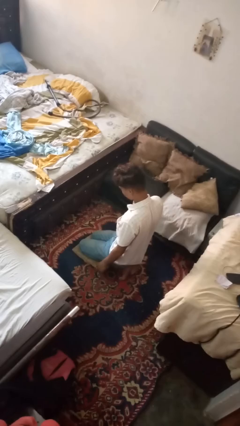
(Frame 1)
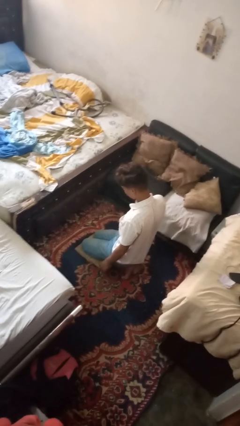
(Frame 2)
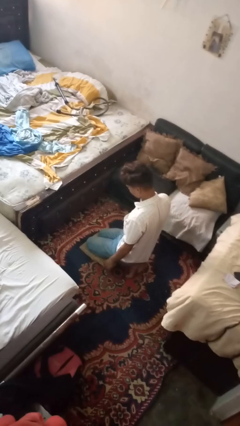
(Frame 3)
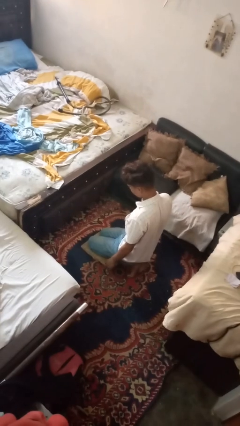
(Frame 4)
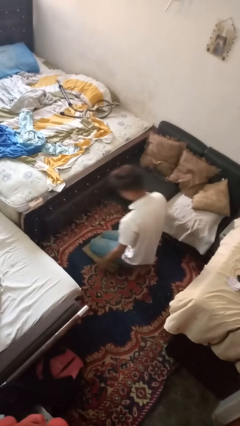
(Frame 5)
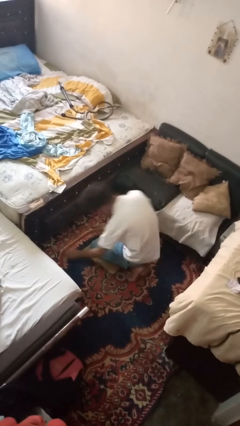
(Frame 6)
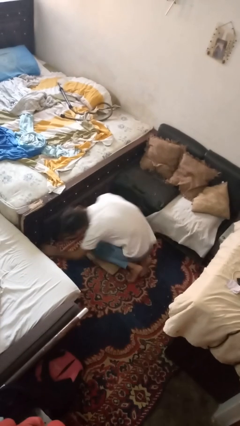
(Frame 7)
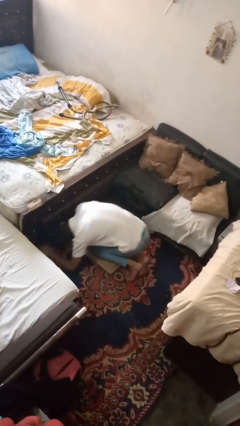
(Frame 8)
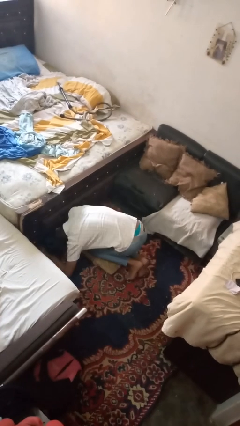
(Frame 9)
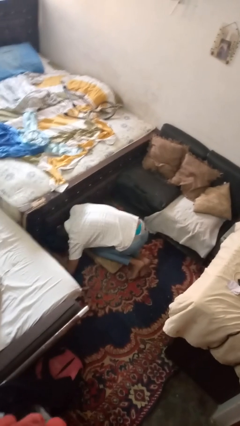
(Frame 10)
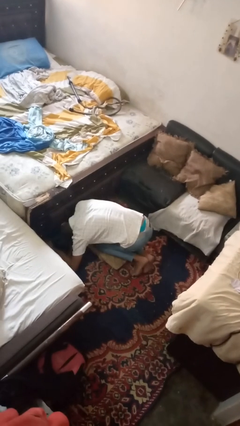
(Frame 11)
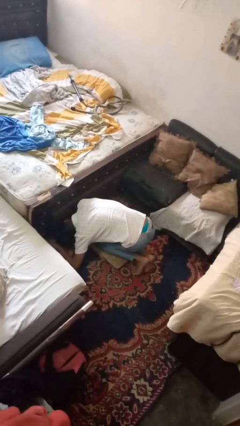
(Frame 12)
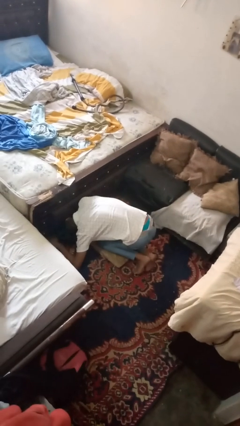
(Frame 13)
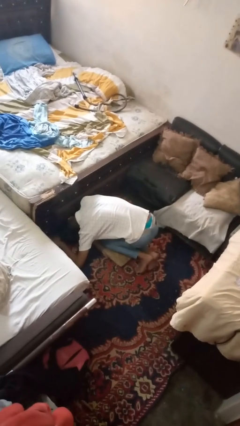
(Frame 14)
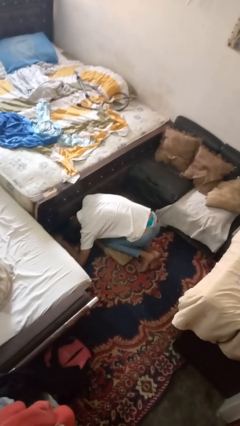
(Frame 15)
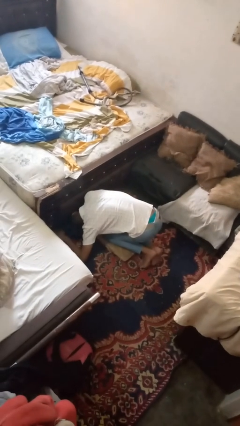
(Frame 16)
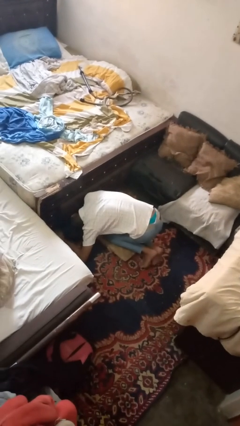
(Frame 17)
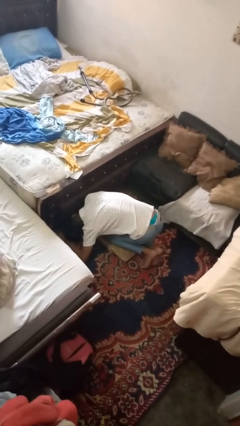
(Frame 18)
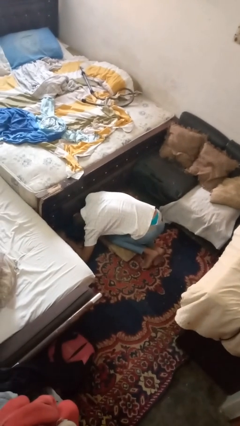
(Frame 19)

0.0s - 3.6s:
person searches under bed

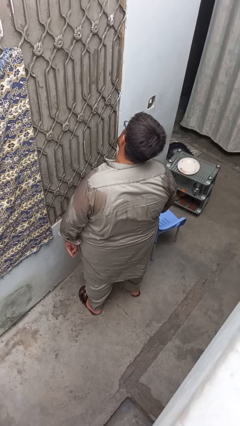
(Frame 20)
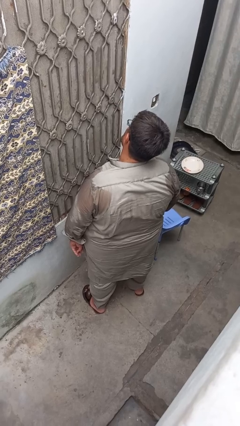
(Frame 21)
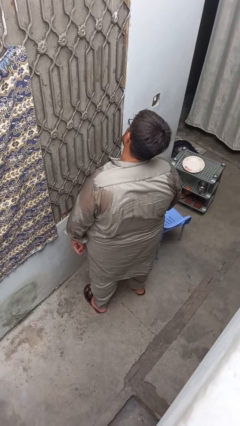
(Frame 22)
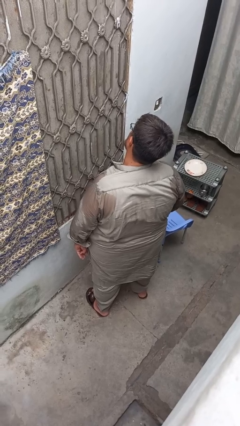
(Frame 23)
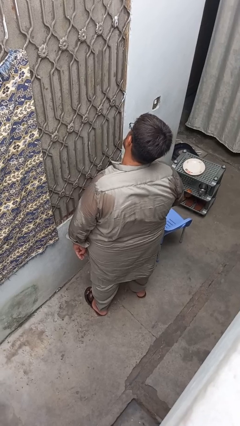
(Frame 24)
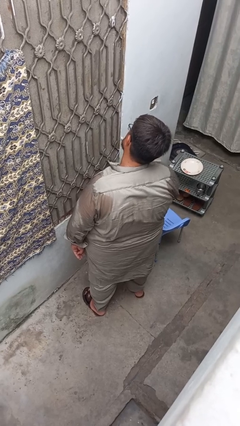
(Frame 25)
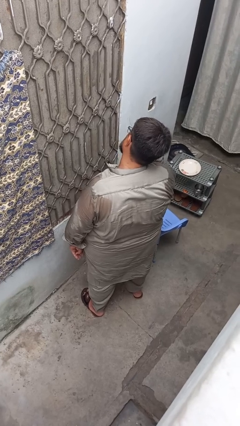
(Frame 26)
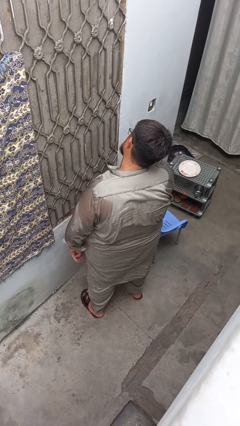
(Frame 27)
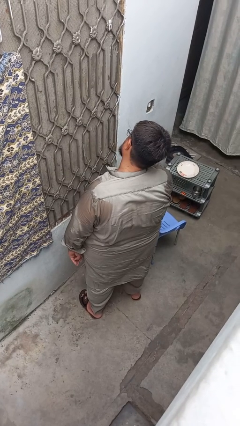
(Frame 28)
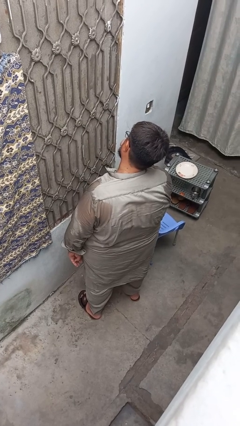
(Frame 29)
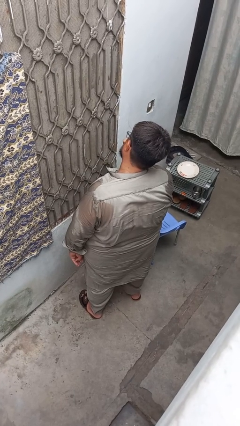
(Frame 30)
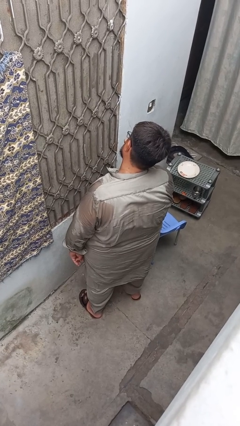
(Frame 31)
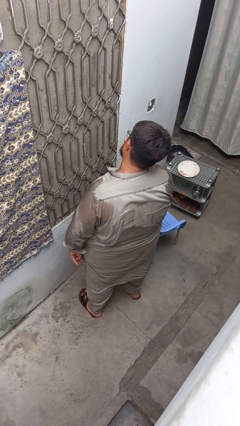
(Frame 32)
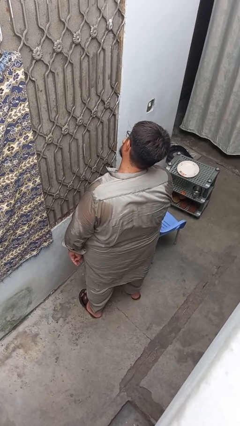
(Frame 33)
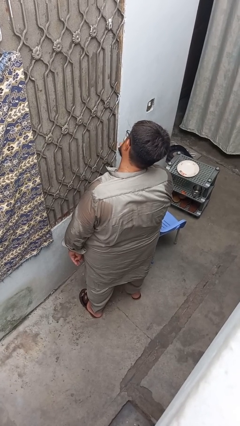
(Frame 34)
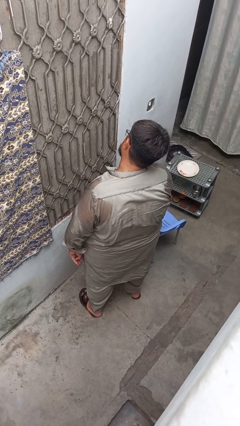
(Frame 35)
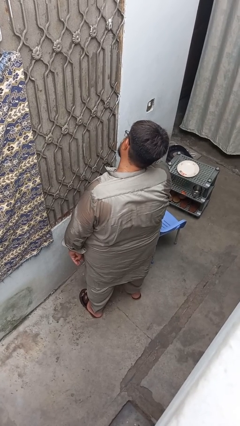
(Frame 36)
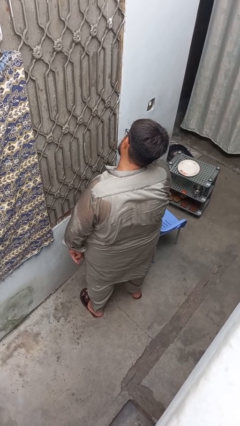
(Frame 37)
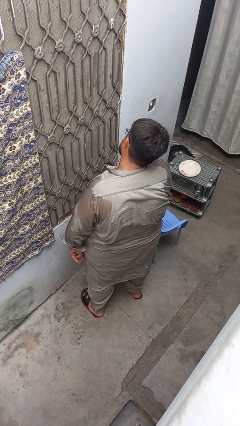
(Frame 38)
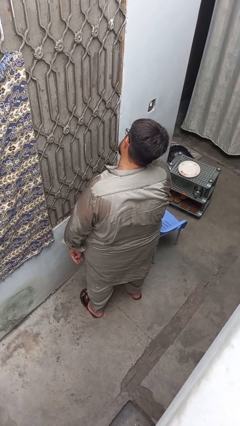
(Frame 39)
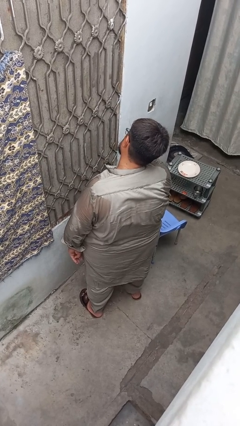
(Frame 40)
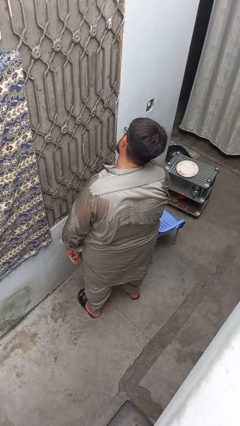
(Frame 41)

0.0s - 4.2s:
person brushes teeth

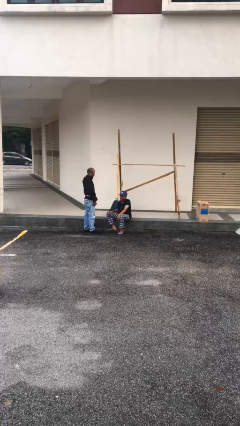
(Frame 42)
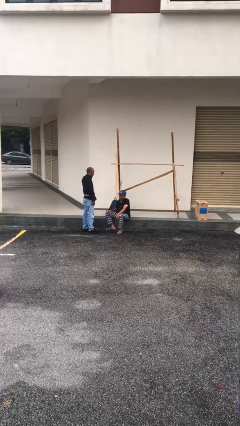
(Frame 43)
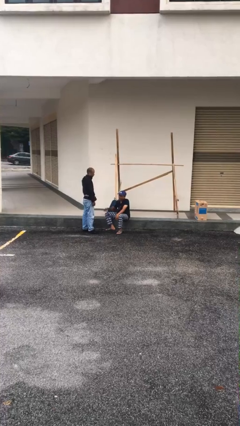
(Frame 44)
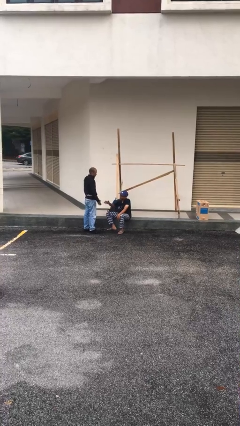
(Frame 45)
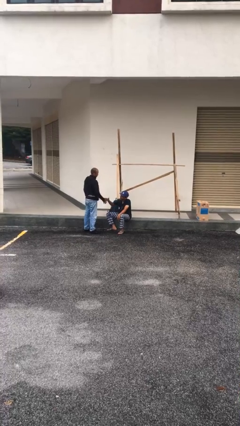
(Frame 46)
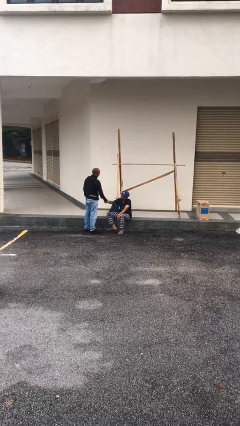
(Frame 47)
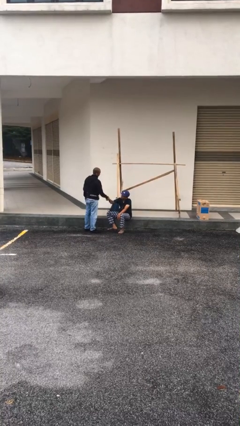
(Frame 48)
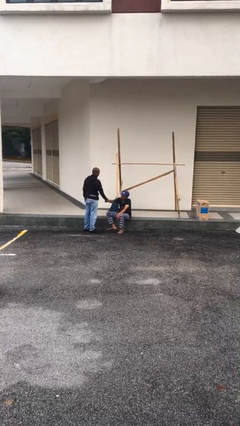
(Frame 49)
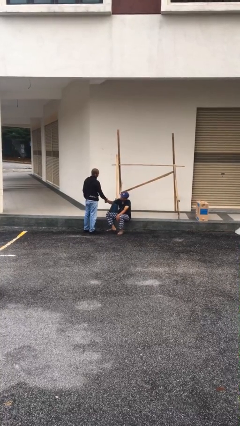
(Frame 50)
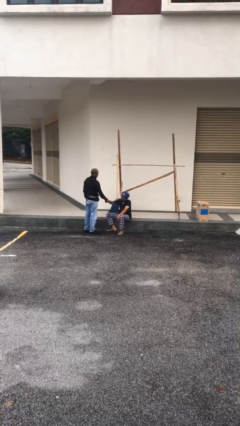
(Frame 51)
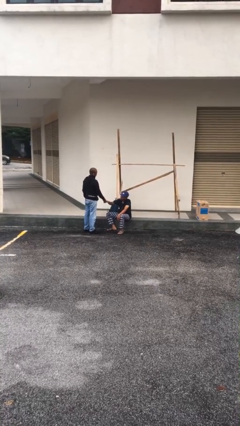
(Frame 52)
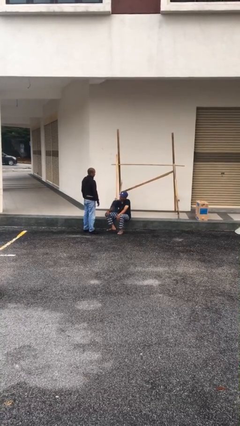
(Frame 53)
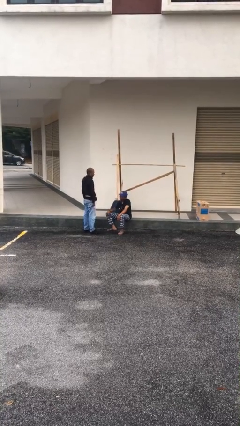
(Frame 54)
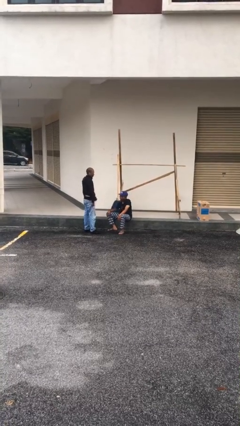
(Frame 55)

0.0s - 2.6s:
person shakes hand

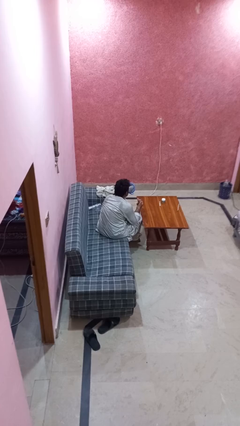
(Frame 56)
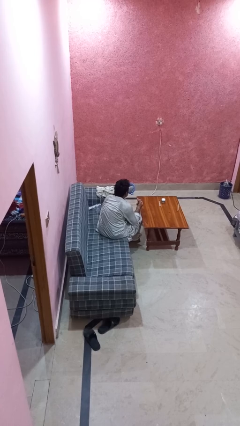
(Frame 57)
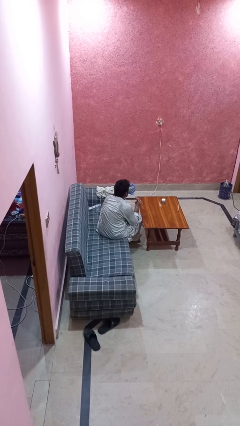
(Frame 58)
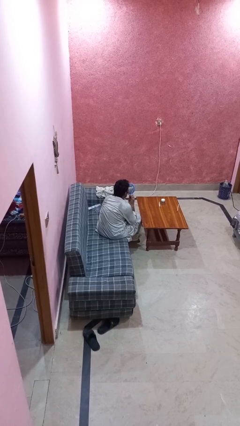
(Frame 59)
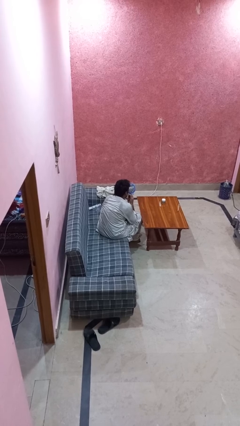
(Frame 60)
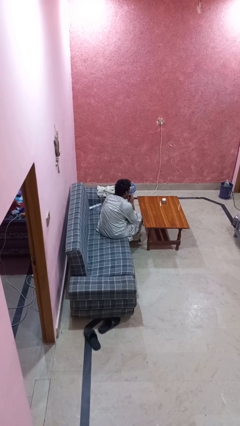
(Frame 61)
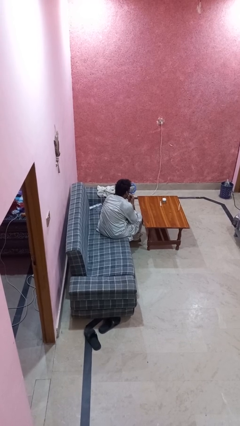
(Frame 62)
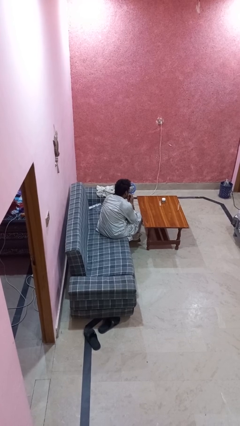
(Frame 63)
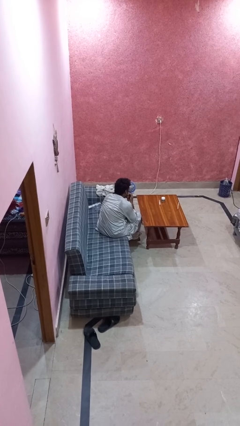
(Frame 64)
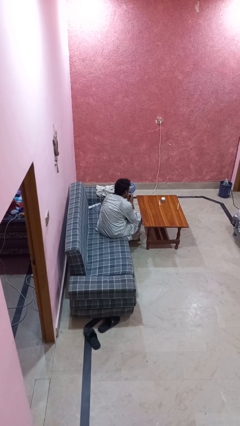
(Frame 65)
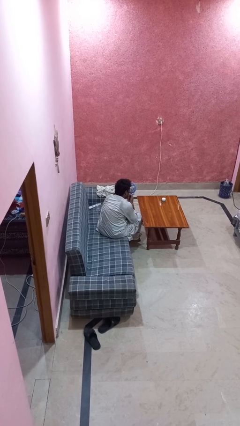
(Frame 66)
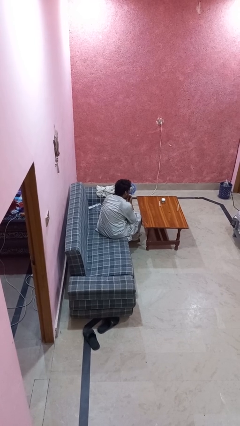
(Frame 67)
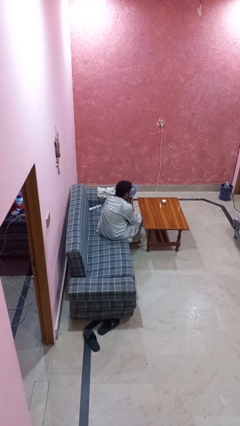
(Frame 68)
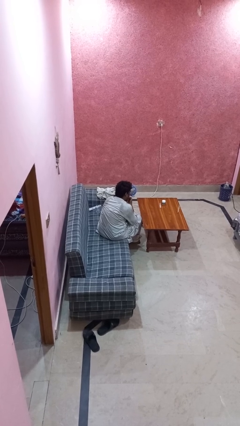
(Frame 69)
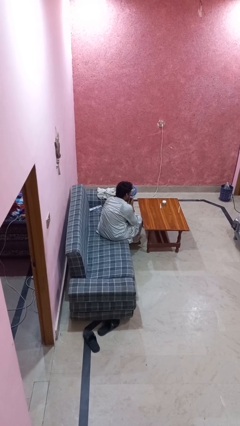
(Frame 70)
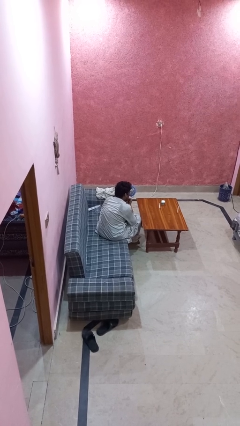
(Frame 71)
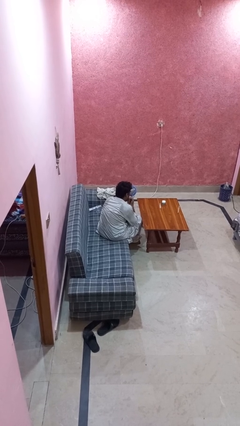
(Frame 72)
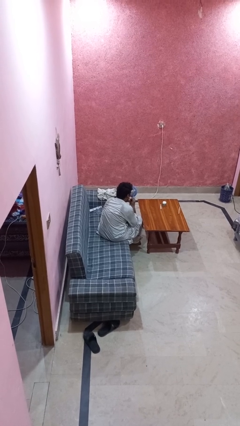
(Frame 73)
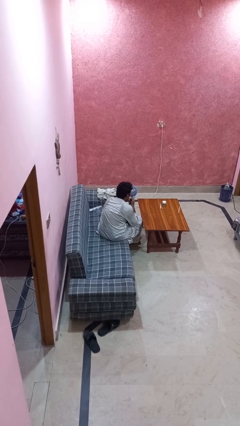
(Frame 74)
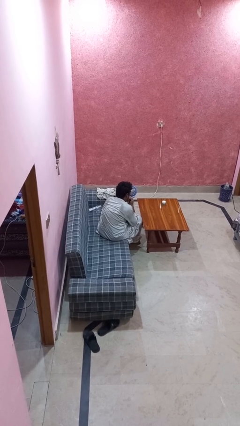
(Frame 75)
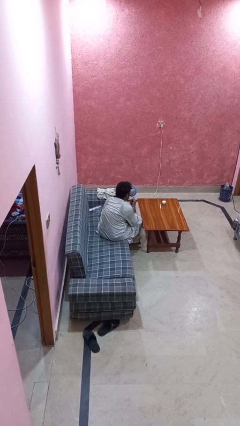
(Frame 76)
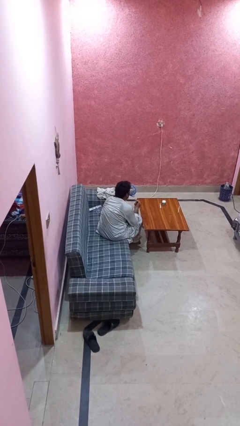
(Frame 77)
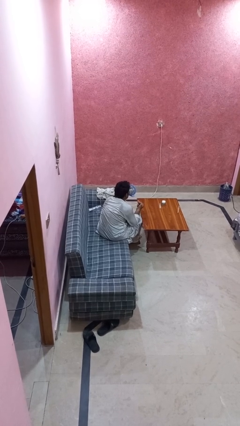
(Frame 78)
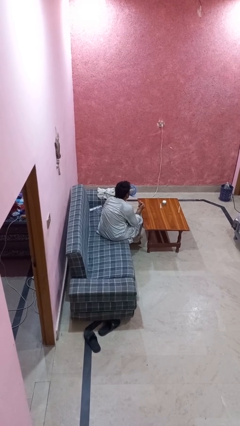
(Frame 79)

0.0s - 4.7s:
person applies lip makeup

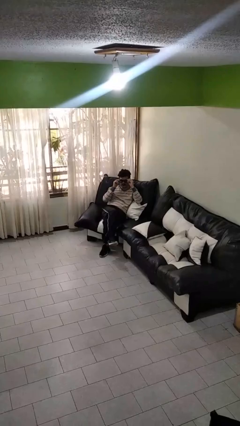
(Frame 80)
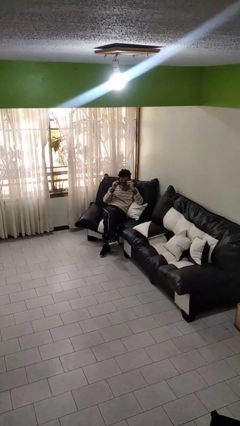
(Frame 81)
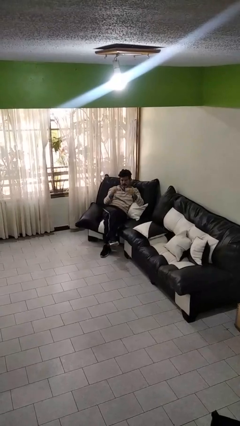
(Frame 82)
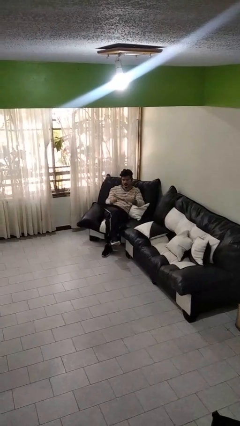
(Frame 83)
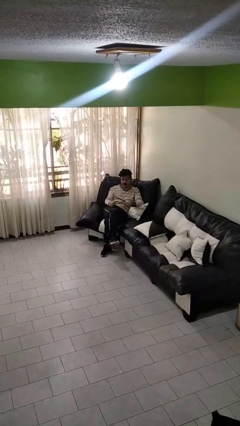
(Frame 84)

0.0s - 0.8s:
person takes off sunglasses

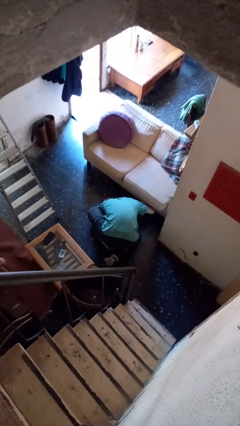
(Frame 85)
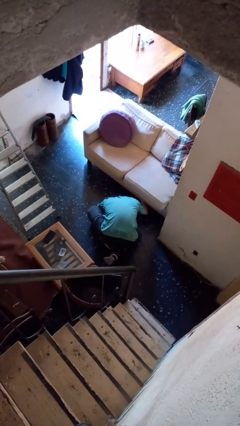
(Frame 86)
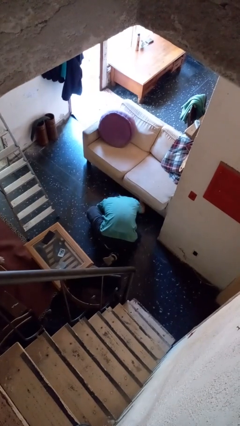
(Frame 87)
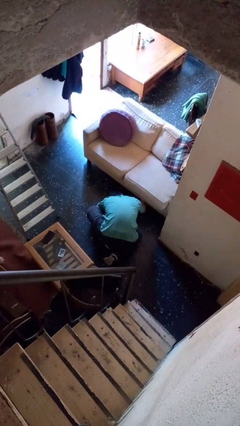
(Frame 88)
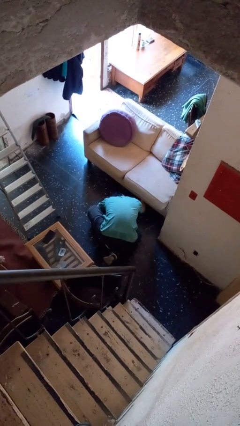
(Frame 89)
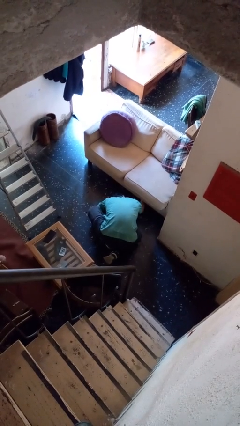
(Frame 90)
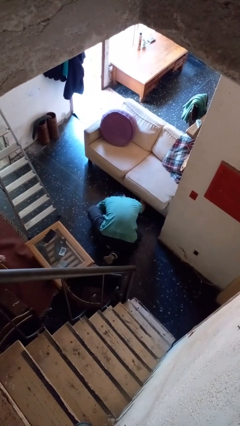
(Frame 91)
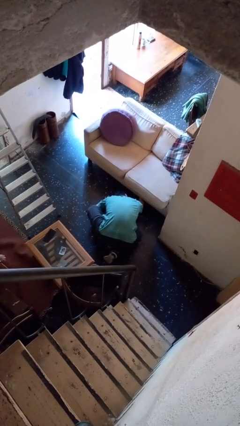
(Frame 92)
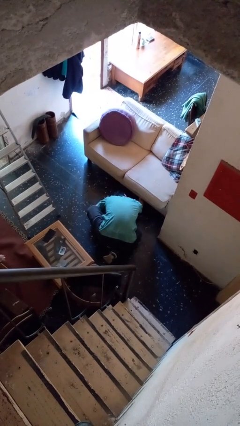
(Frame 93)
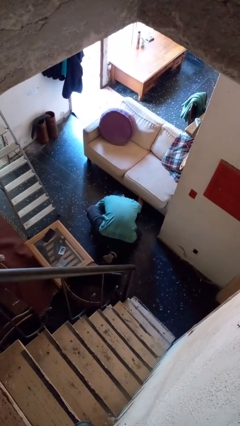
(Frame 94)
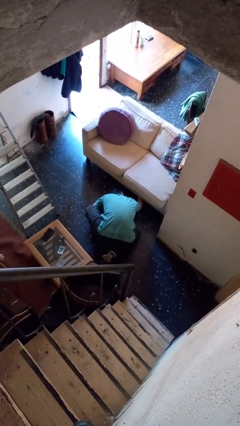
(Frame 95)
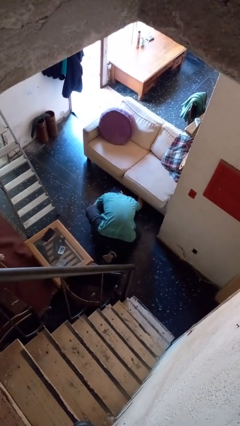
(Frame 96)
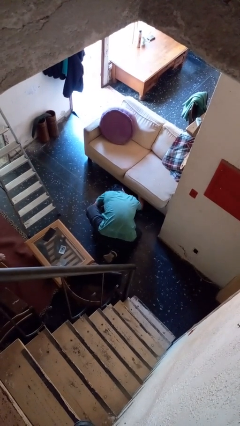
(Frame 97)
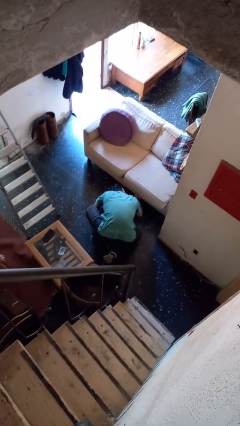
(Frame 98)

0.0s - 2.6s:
person searches under couch
